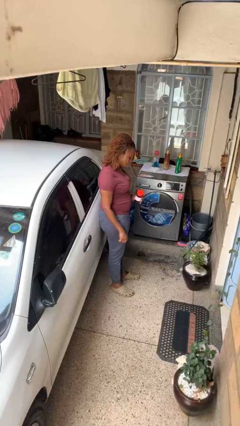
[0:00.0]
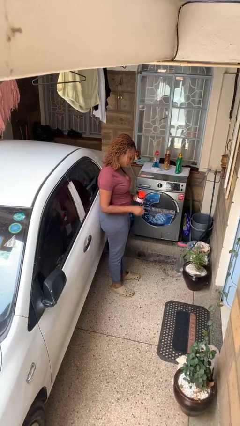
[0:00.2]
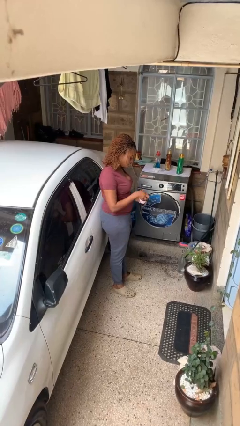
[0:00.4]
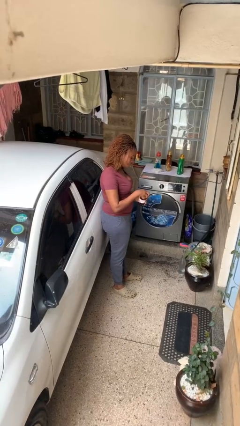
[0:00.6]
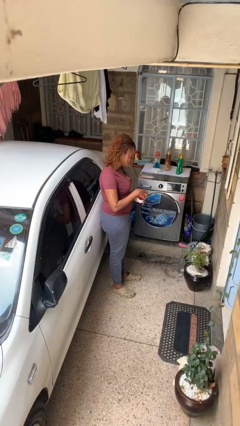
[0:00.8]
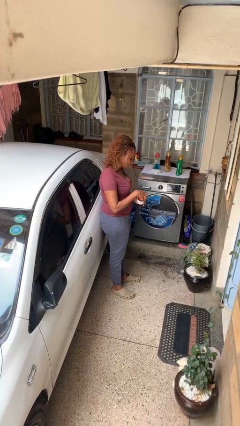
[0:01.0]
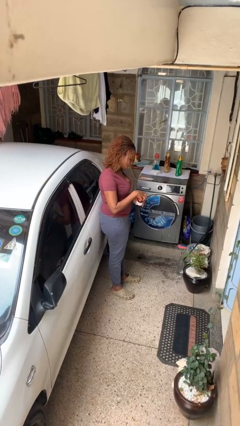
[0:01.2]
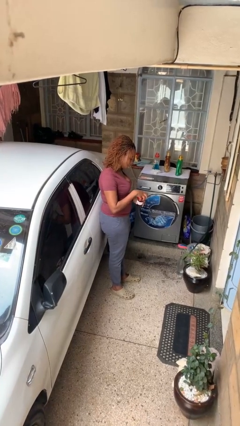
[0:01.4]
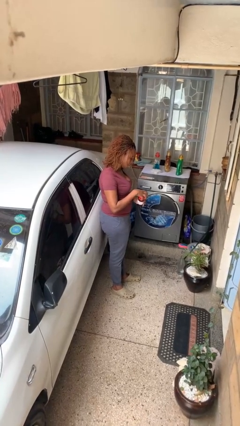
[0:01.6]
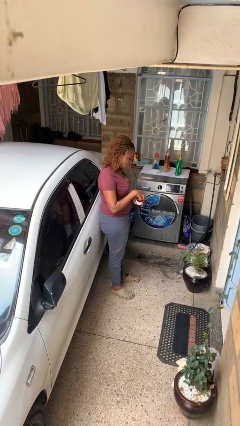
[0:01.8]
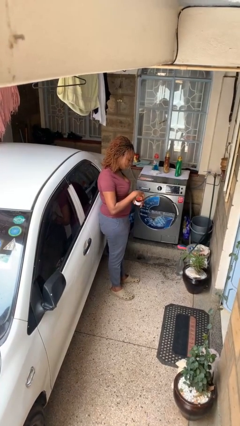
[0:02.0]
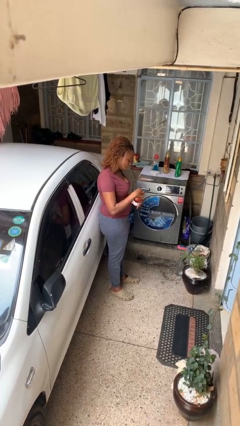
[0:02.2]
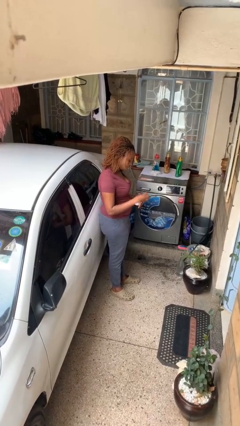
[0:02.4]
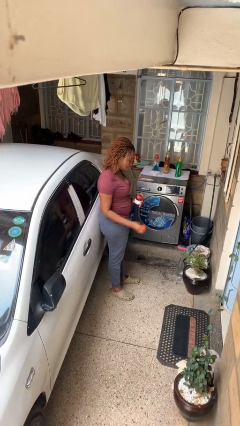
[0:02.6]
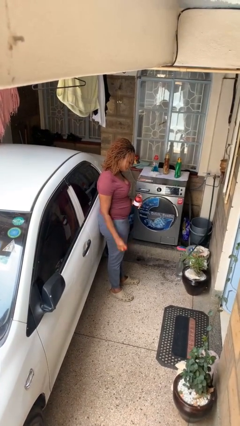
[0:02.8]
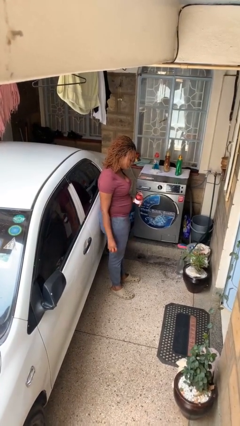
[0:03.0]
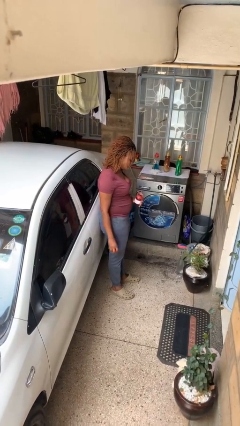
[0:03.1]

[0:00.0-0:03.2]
person opens jar

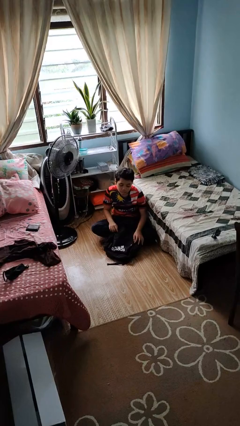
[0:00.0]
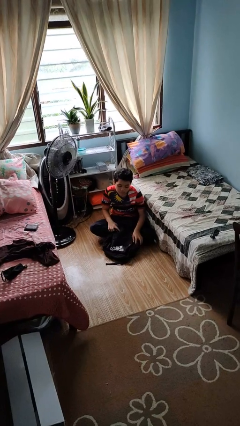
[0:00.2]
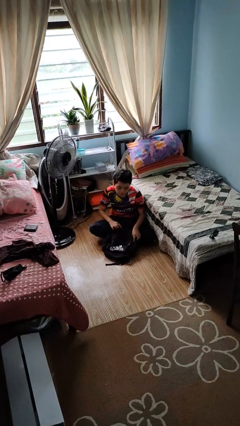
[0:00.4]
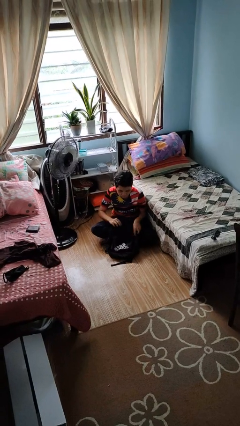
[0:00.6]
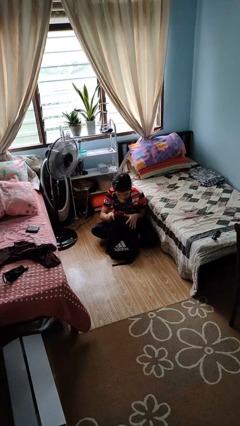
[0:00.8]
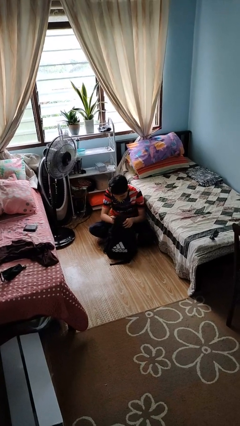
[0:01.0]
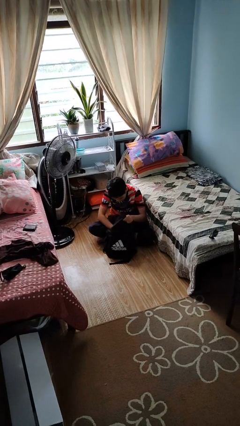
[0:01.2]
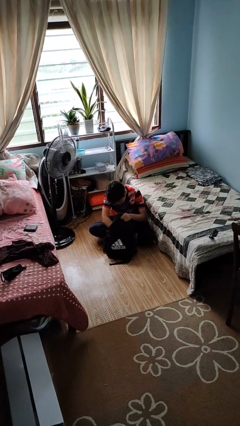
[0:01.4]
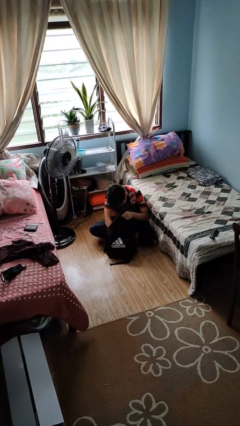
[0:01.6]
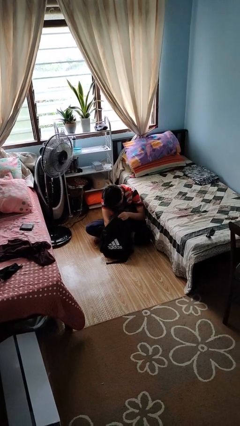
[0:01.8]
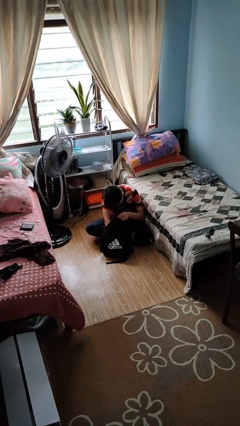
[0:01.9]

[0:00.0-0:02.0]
person searches in backpack

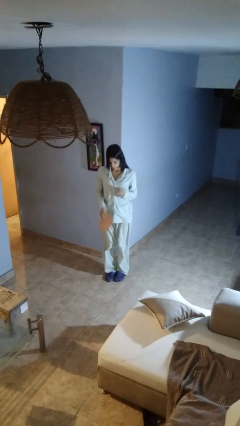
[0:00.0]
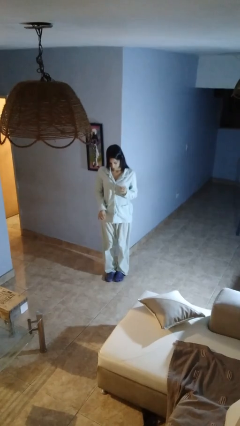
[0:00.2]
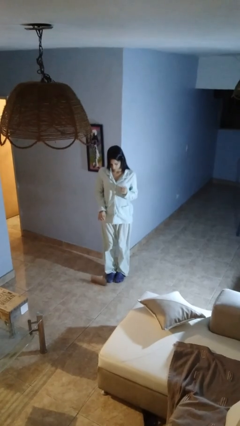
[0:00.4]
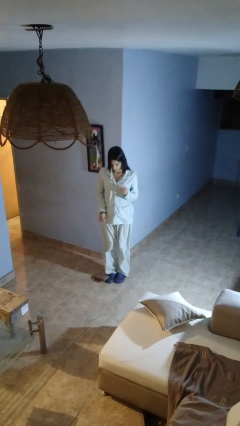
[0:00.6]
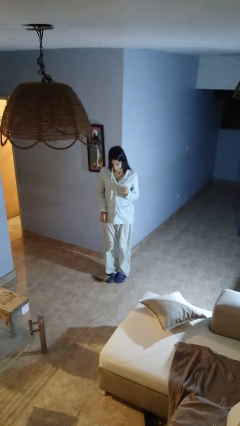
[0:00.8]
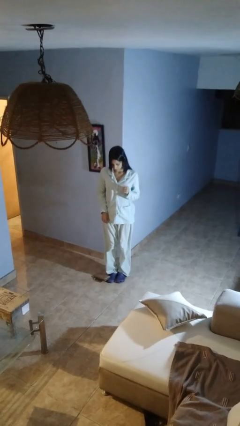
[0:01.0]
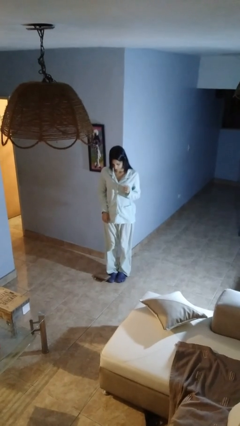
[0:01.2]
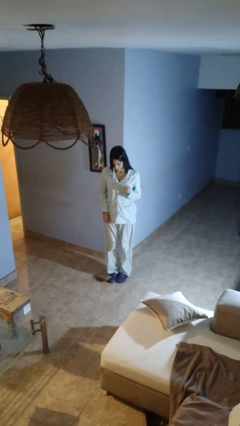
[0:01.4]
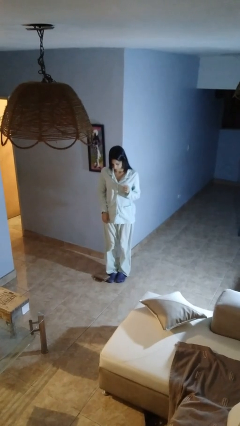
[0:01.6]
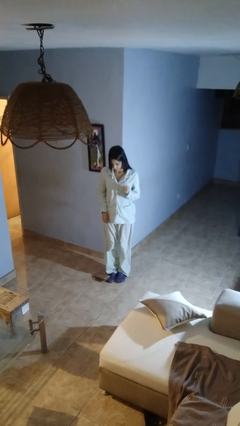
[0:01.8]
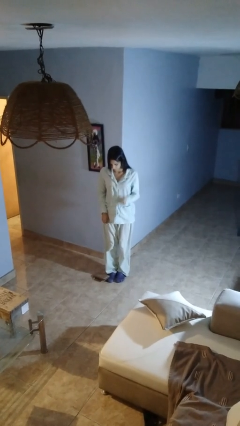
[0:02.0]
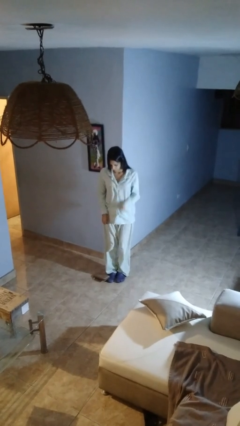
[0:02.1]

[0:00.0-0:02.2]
person drops object

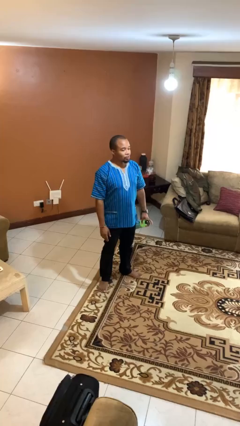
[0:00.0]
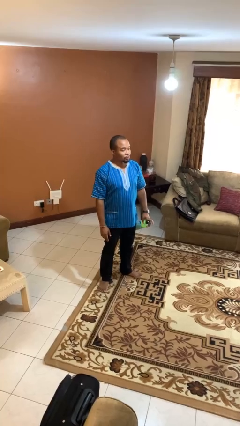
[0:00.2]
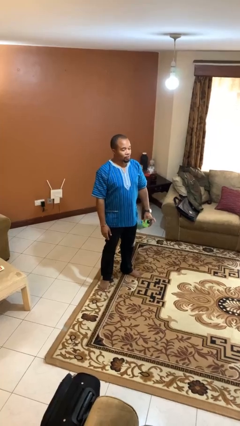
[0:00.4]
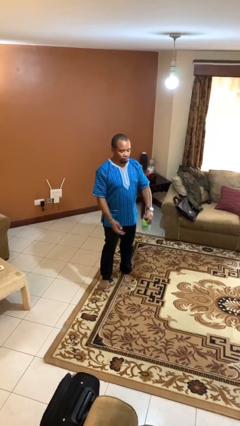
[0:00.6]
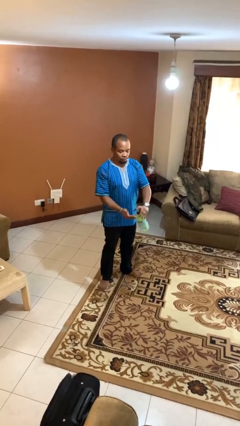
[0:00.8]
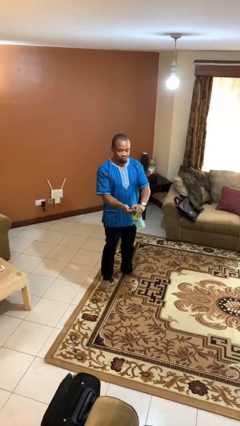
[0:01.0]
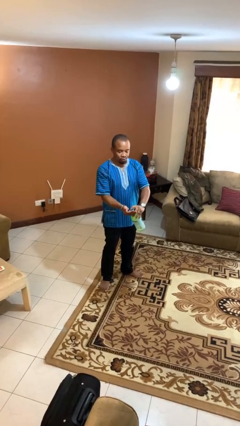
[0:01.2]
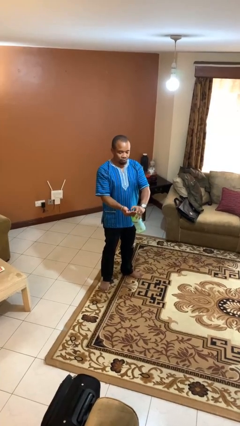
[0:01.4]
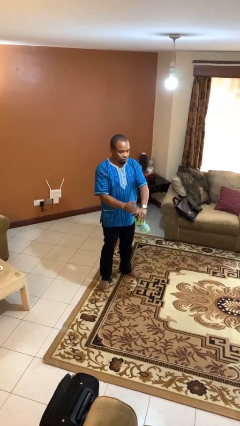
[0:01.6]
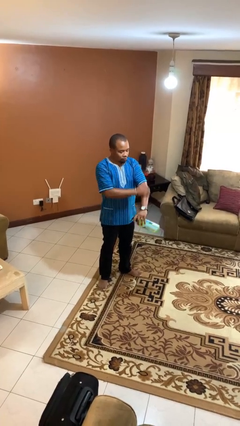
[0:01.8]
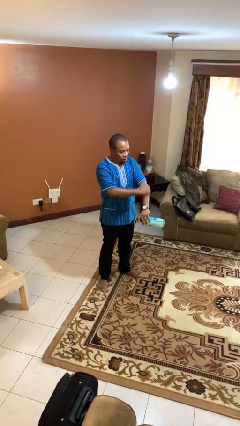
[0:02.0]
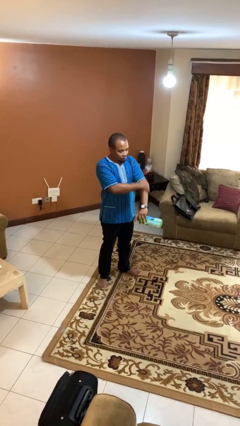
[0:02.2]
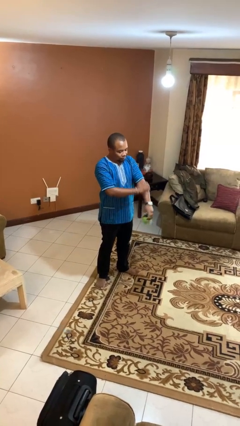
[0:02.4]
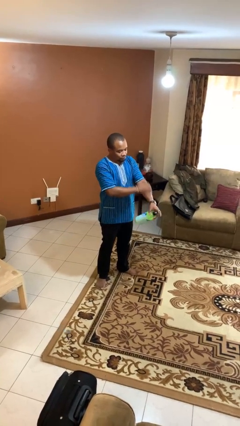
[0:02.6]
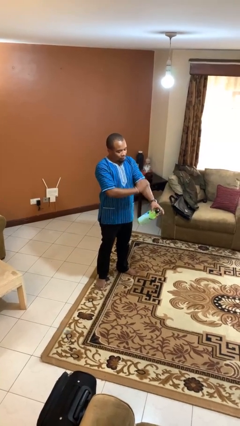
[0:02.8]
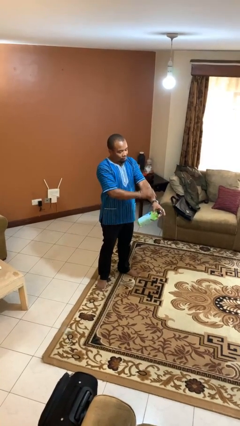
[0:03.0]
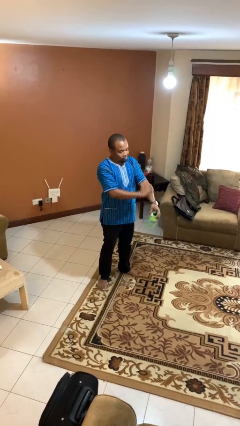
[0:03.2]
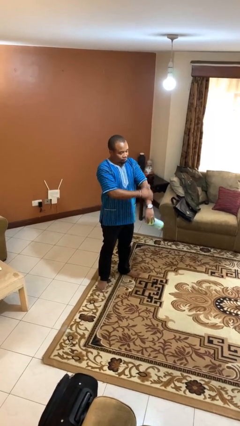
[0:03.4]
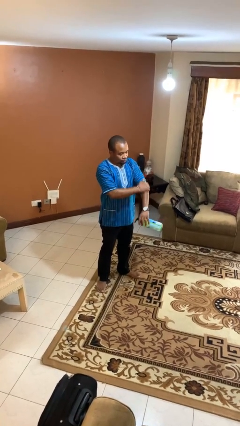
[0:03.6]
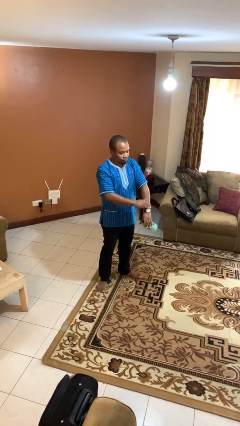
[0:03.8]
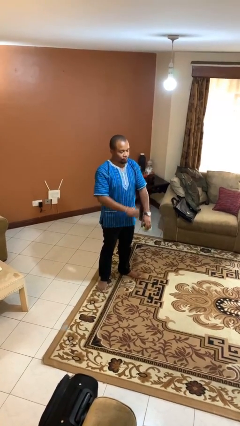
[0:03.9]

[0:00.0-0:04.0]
person applies sunscreen

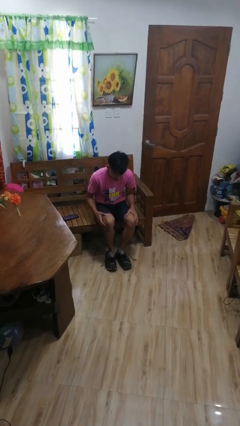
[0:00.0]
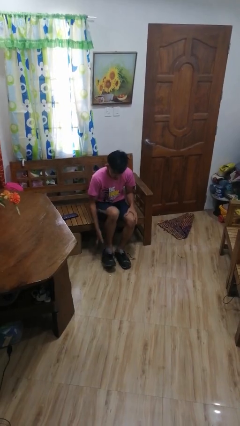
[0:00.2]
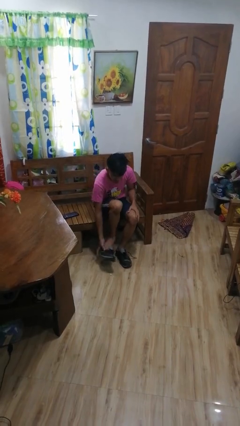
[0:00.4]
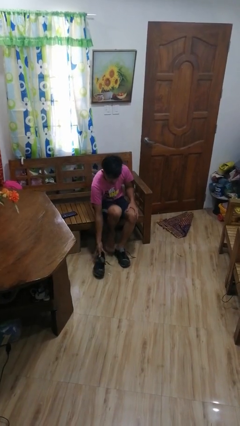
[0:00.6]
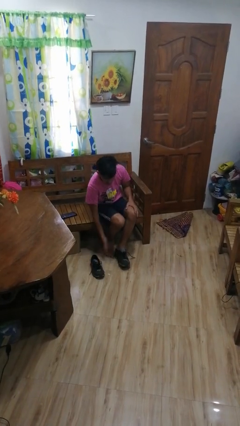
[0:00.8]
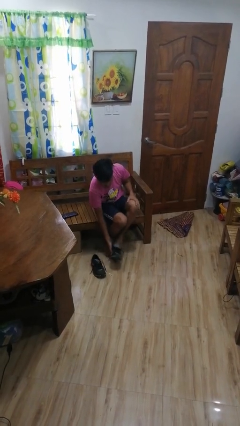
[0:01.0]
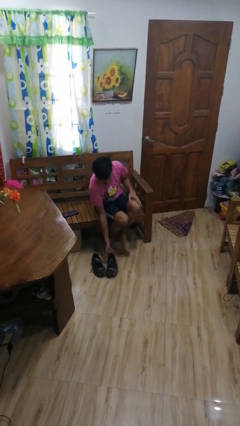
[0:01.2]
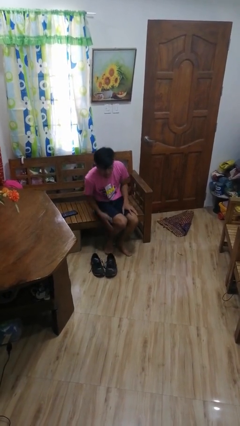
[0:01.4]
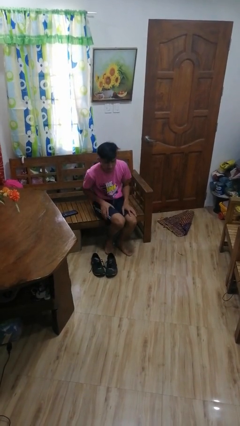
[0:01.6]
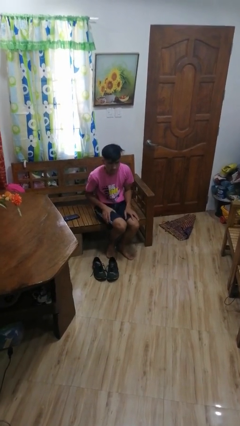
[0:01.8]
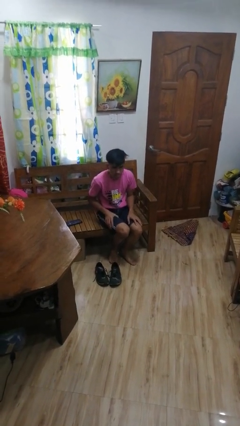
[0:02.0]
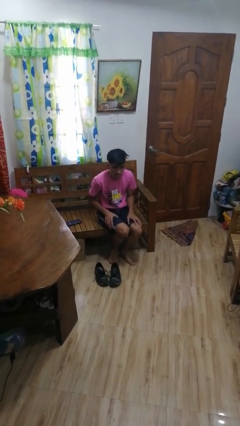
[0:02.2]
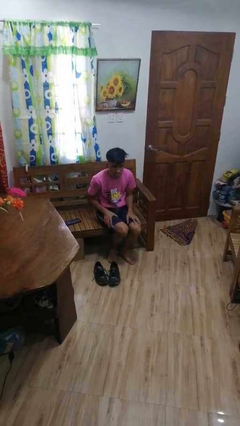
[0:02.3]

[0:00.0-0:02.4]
person takes off shoes

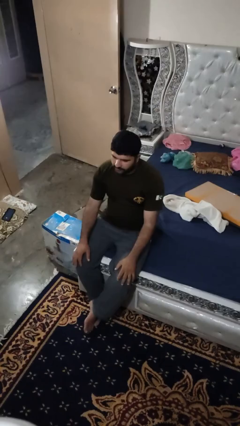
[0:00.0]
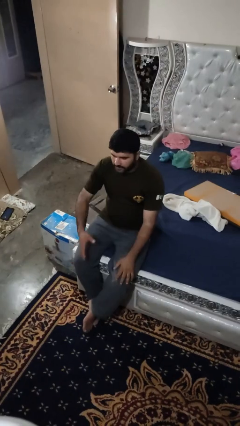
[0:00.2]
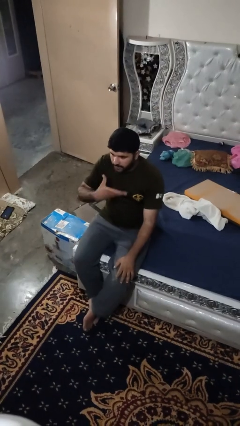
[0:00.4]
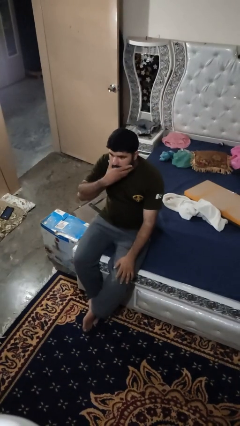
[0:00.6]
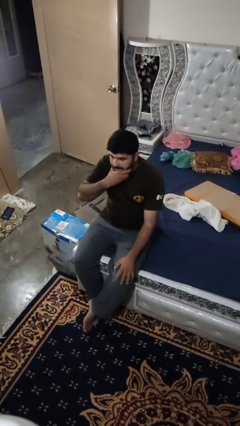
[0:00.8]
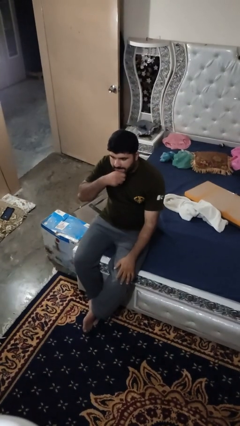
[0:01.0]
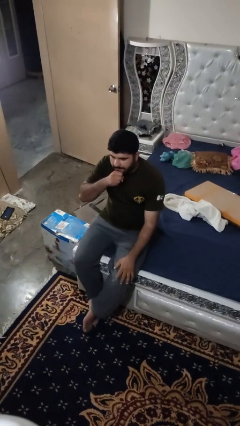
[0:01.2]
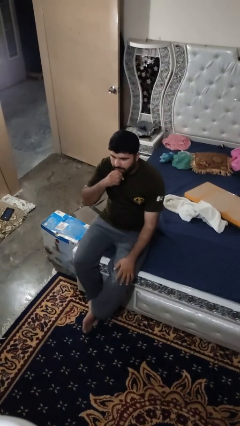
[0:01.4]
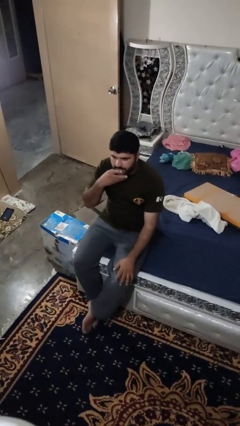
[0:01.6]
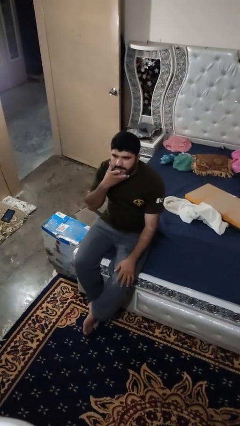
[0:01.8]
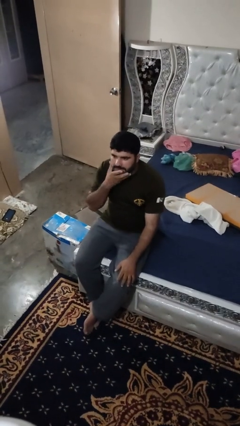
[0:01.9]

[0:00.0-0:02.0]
person strokes chin

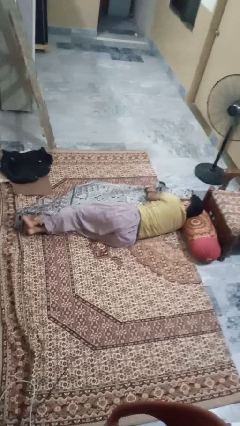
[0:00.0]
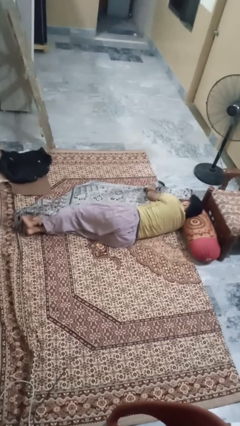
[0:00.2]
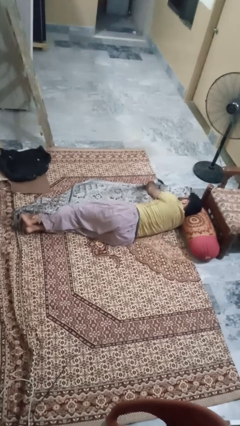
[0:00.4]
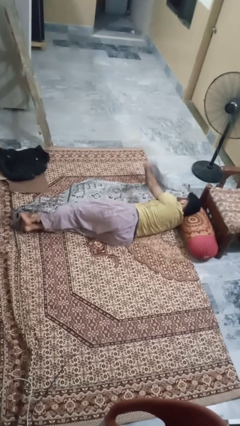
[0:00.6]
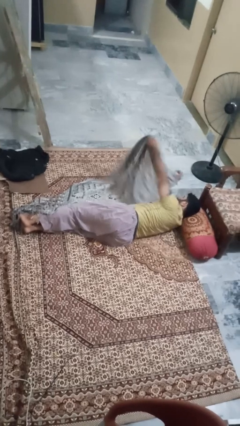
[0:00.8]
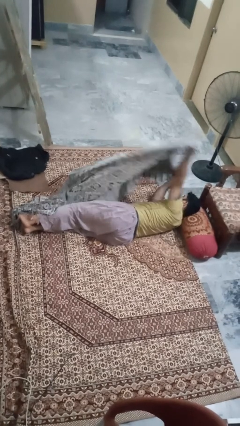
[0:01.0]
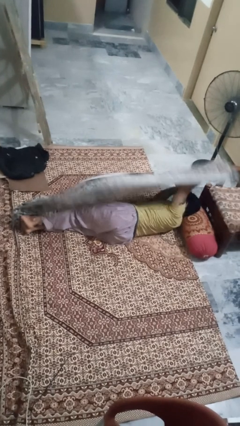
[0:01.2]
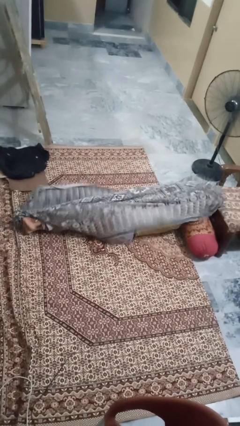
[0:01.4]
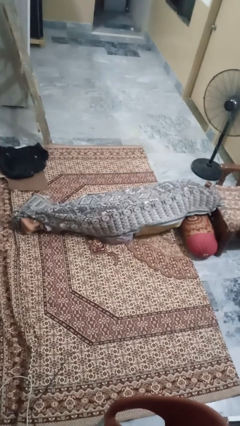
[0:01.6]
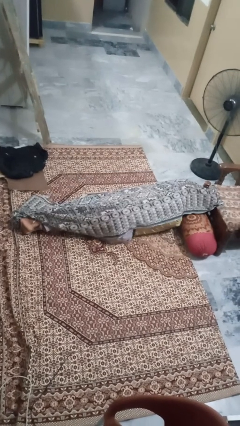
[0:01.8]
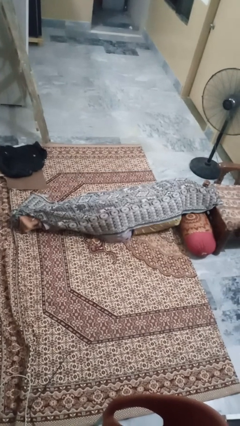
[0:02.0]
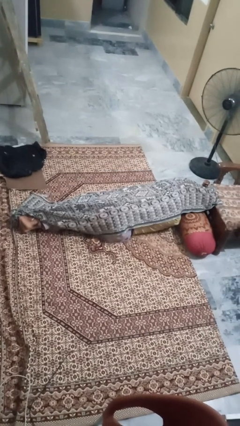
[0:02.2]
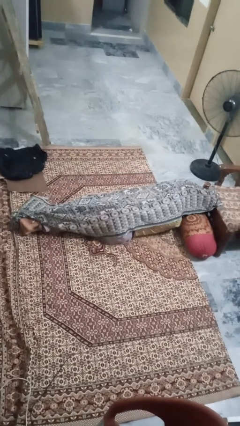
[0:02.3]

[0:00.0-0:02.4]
person covers with blanket
